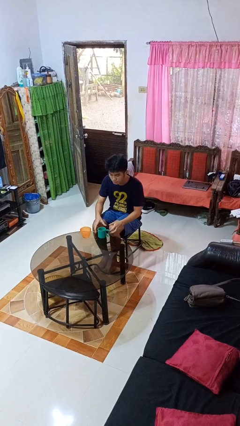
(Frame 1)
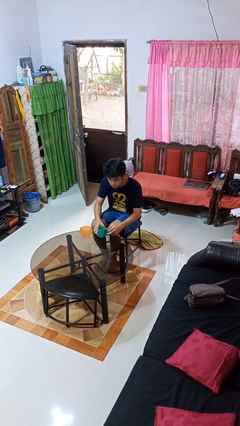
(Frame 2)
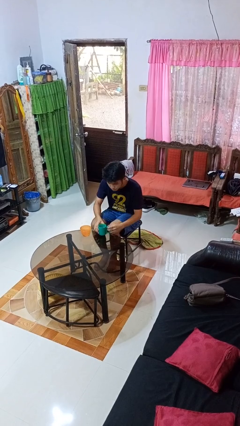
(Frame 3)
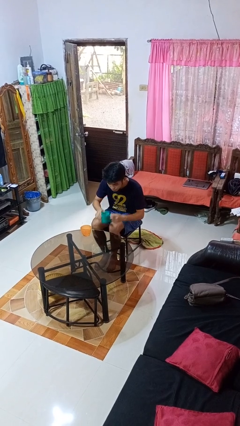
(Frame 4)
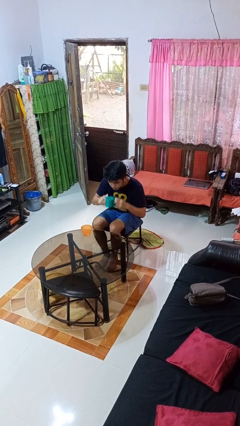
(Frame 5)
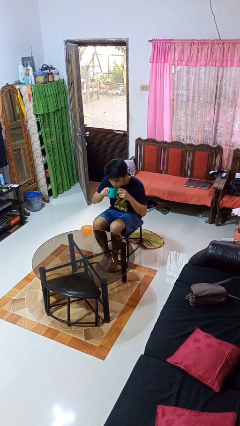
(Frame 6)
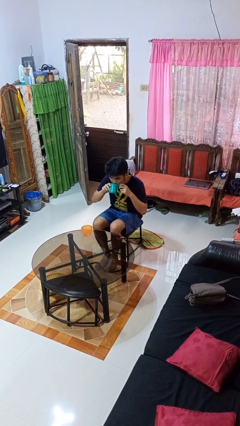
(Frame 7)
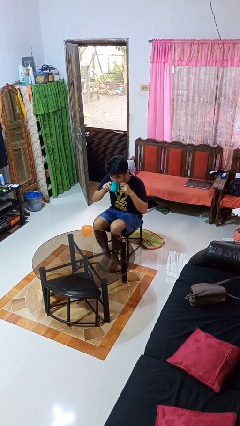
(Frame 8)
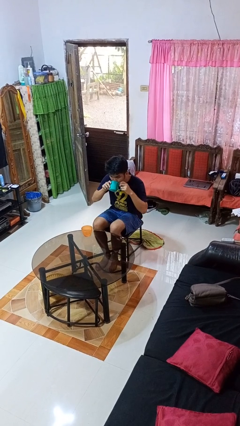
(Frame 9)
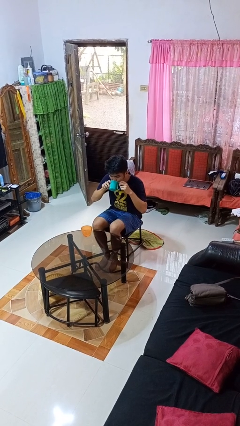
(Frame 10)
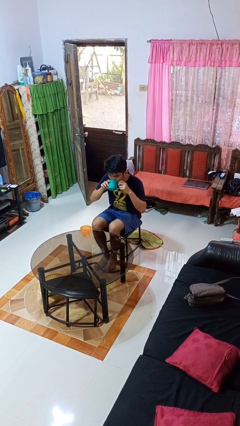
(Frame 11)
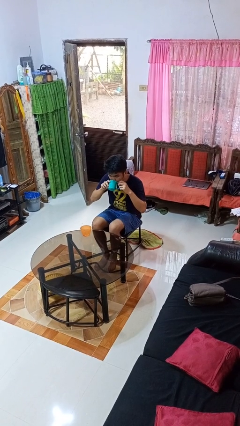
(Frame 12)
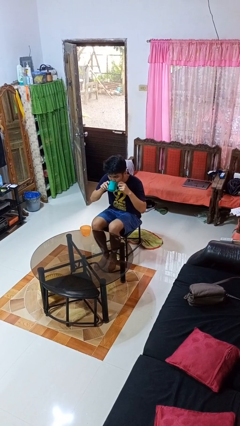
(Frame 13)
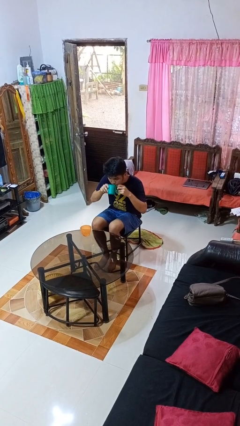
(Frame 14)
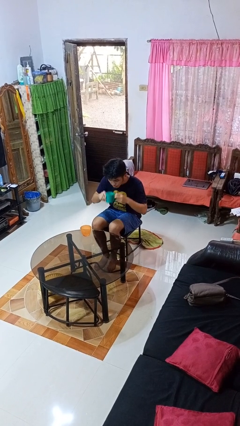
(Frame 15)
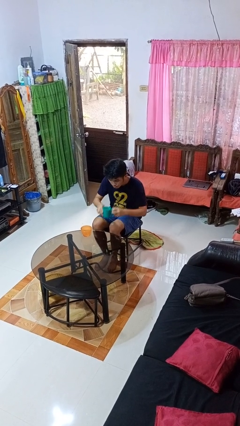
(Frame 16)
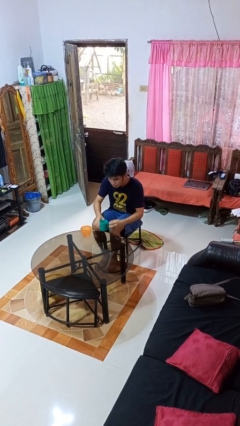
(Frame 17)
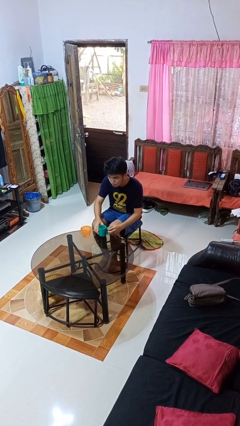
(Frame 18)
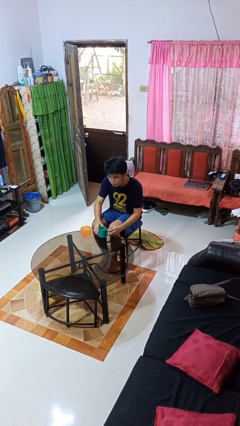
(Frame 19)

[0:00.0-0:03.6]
person drinks from cup

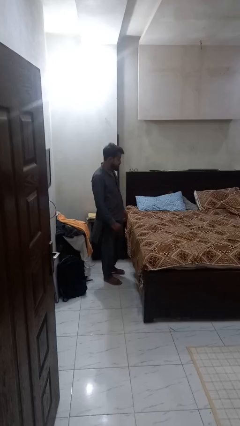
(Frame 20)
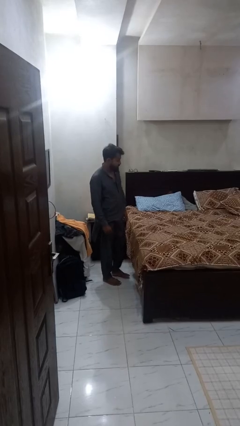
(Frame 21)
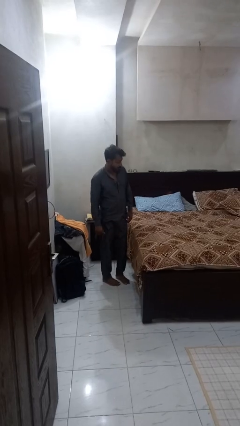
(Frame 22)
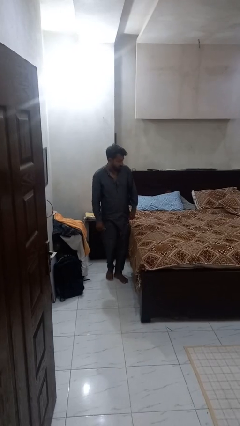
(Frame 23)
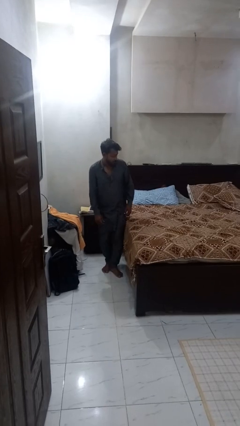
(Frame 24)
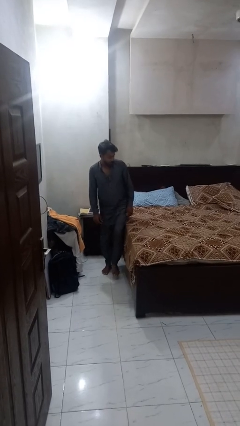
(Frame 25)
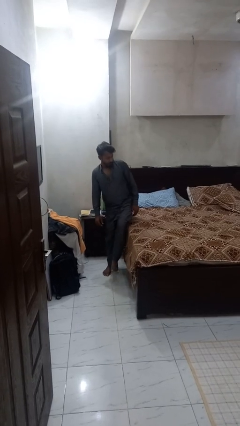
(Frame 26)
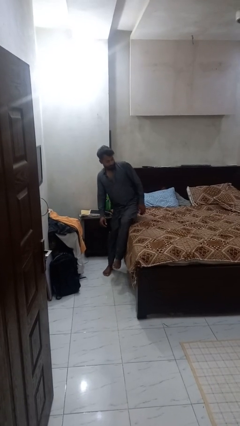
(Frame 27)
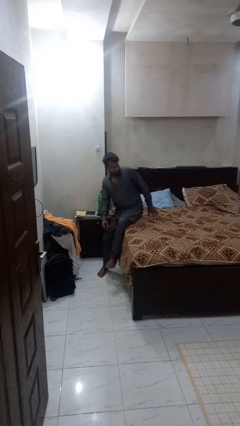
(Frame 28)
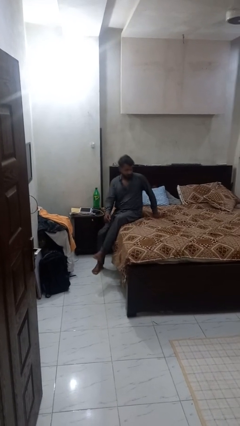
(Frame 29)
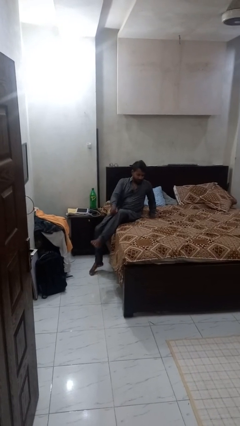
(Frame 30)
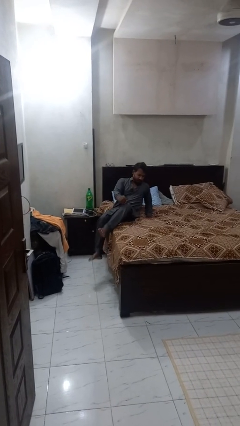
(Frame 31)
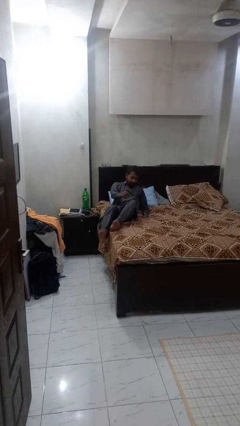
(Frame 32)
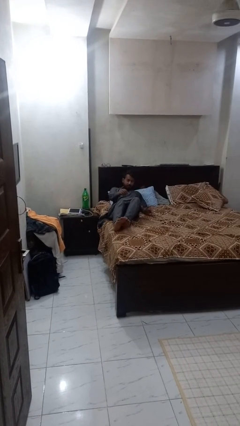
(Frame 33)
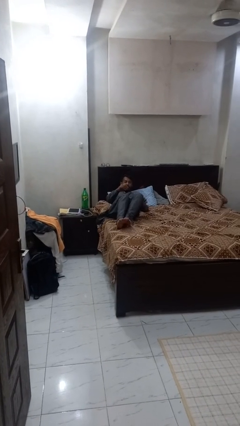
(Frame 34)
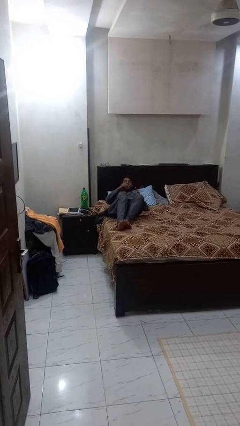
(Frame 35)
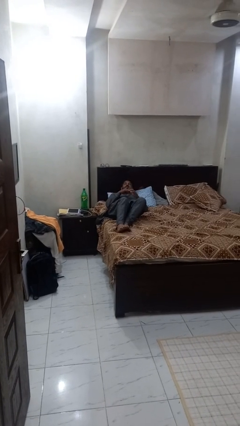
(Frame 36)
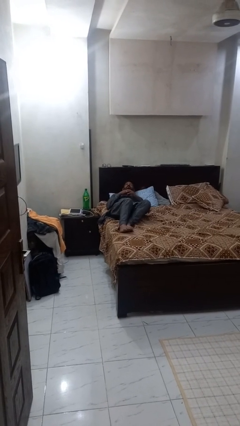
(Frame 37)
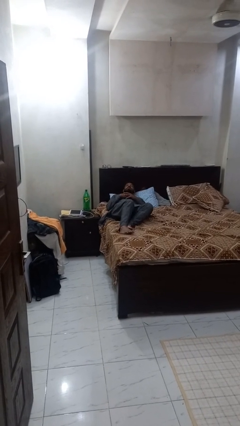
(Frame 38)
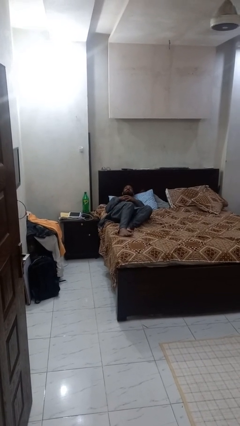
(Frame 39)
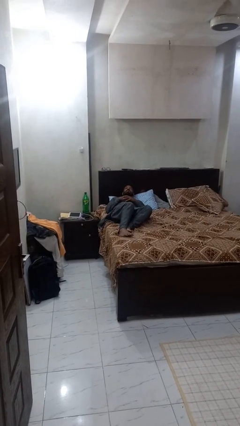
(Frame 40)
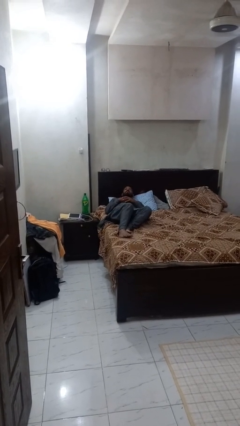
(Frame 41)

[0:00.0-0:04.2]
person lies down on bed

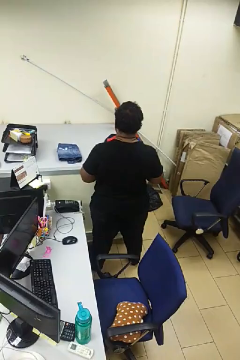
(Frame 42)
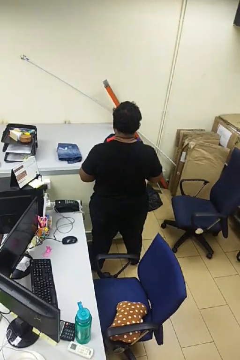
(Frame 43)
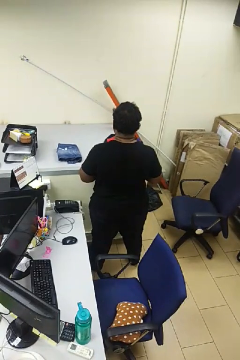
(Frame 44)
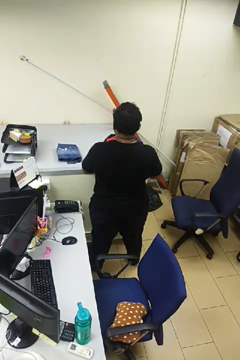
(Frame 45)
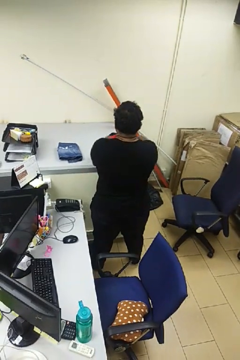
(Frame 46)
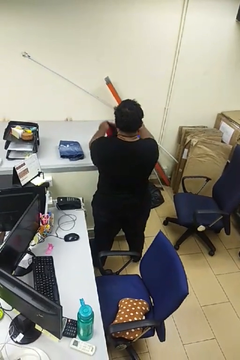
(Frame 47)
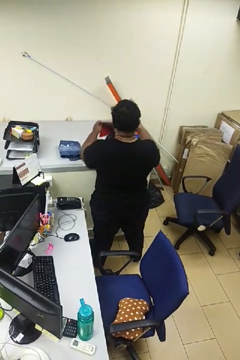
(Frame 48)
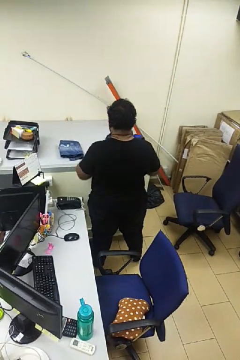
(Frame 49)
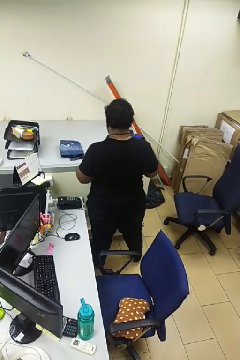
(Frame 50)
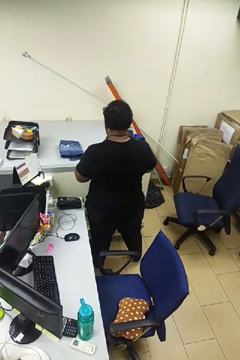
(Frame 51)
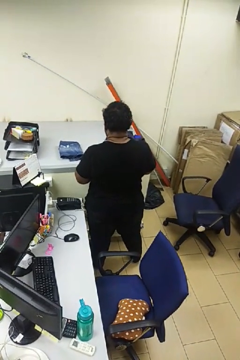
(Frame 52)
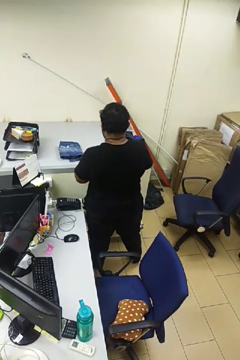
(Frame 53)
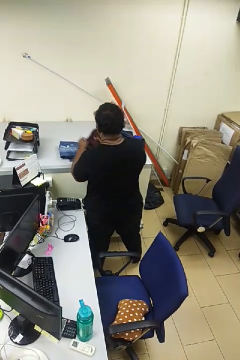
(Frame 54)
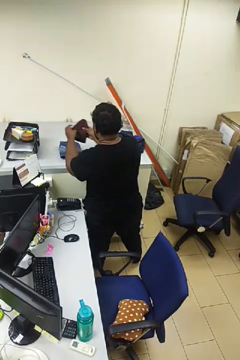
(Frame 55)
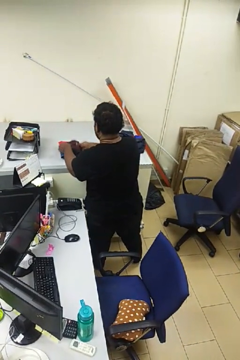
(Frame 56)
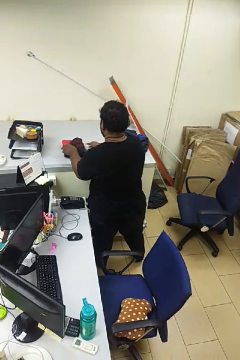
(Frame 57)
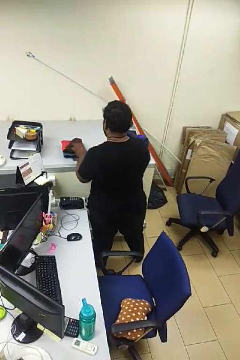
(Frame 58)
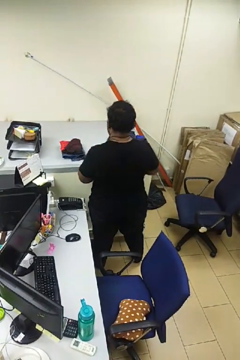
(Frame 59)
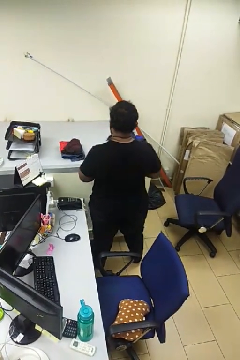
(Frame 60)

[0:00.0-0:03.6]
person folds shirt

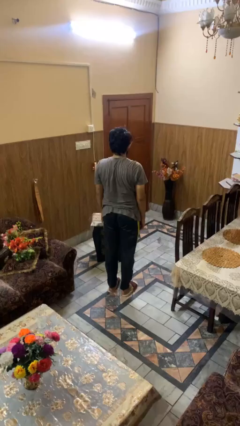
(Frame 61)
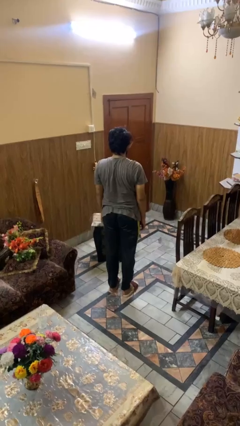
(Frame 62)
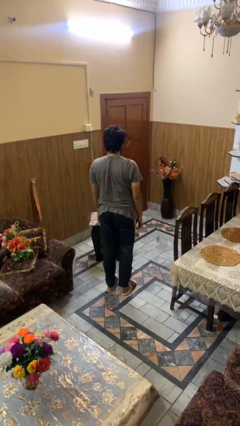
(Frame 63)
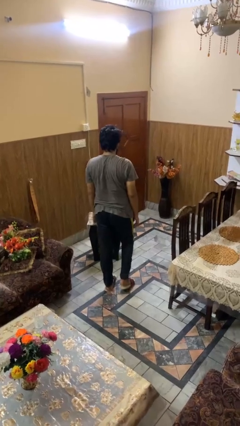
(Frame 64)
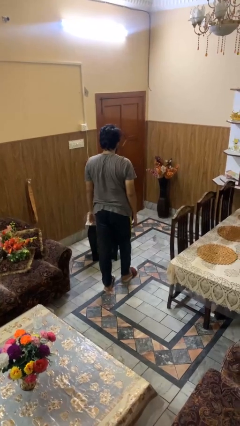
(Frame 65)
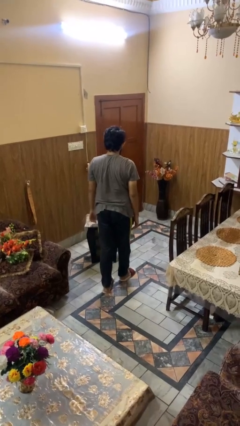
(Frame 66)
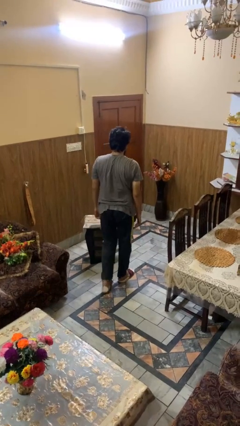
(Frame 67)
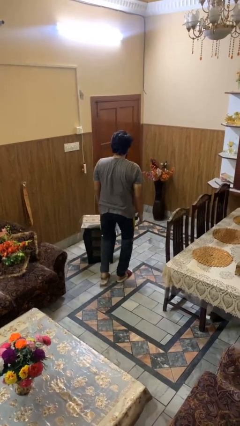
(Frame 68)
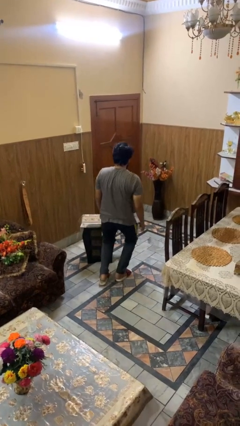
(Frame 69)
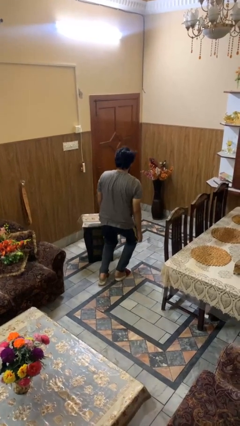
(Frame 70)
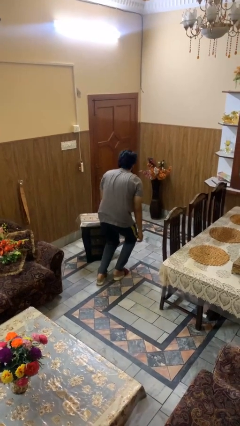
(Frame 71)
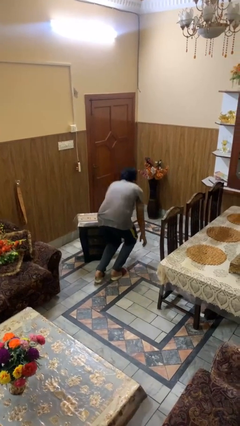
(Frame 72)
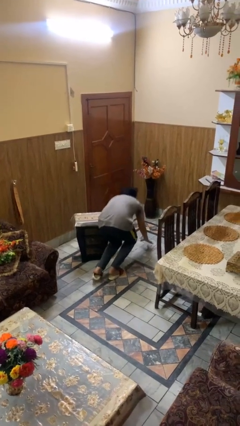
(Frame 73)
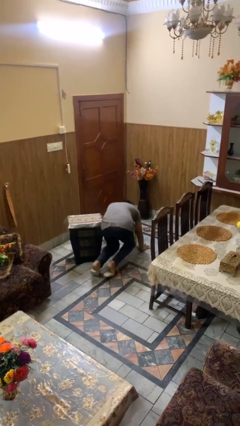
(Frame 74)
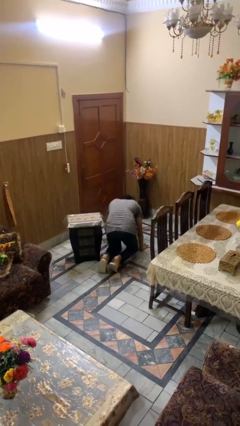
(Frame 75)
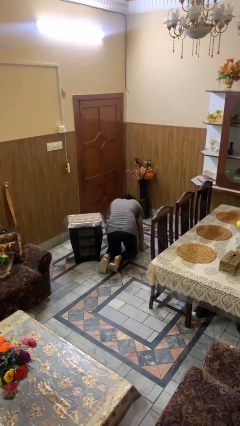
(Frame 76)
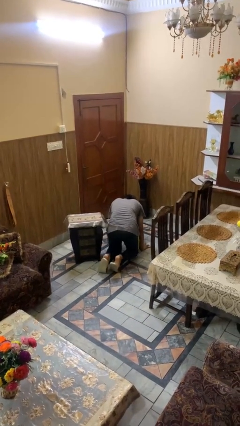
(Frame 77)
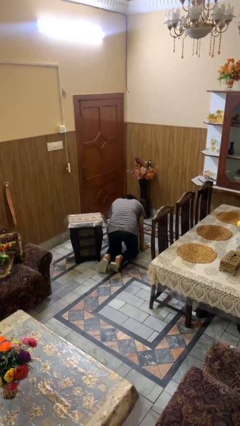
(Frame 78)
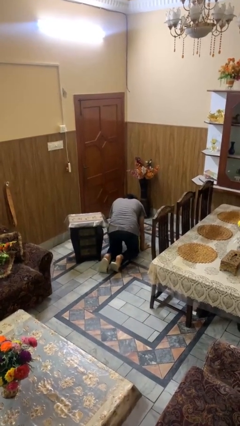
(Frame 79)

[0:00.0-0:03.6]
person trips on object on floor

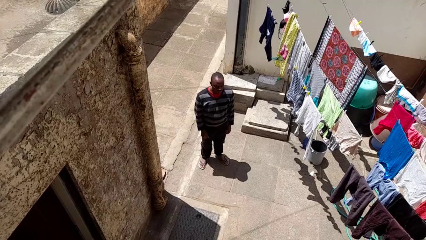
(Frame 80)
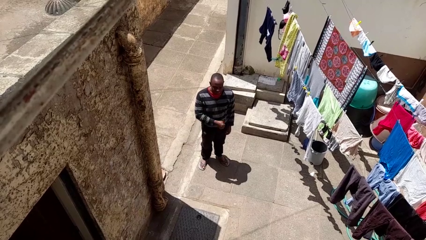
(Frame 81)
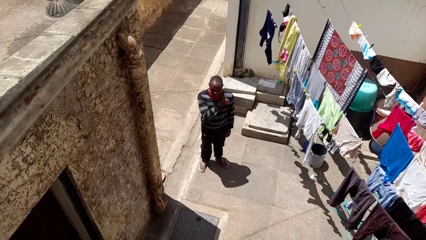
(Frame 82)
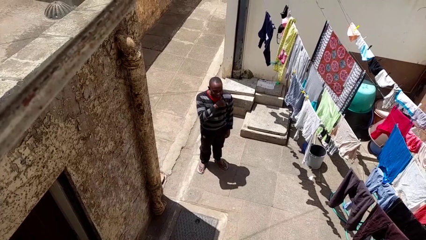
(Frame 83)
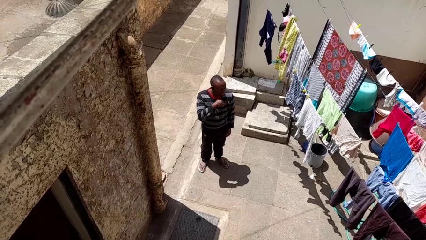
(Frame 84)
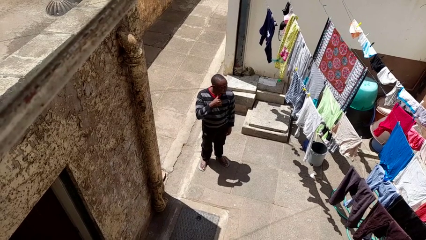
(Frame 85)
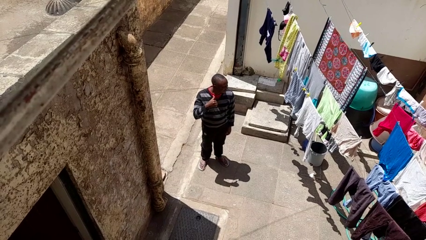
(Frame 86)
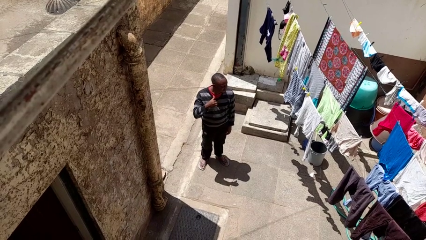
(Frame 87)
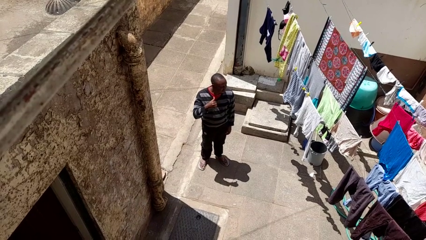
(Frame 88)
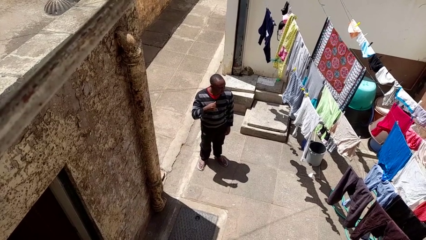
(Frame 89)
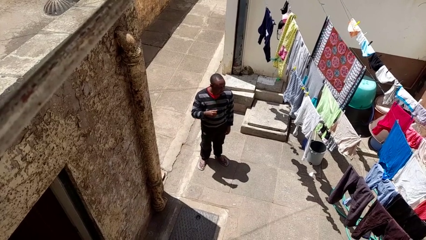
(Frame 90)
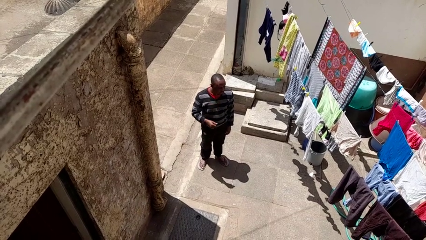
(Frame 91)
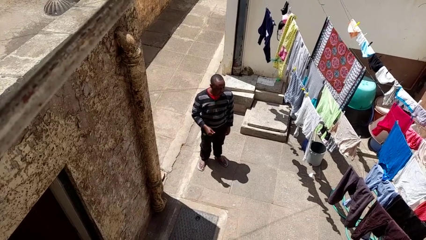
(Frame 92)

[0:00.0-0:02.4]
person gestures cut

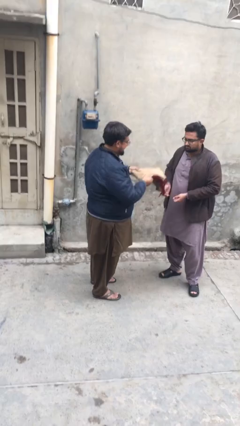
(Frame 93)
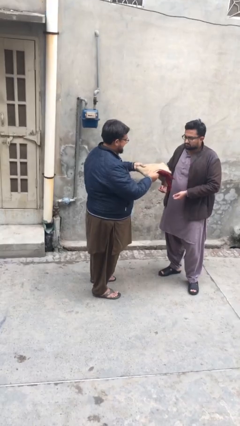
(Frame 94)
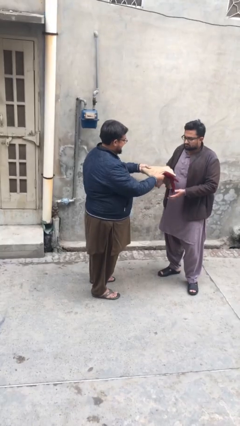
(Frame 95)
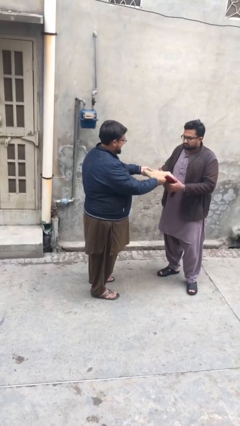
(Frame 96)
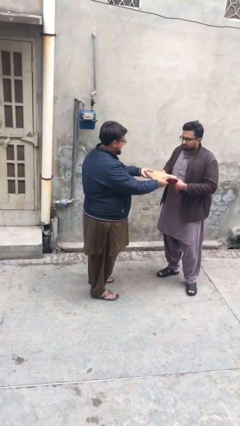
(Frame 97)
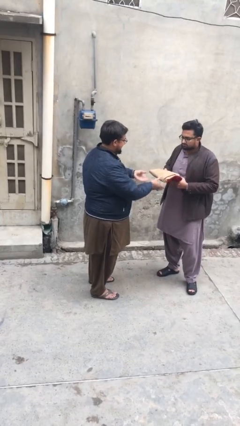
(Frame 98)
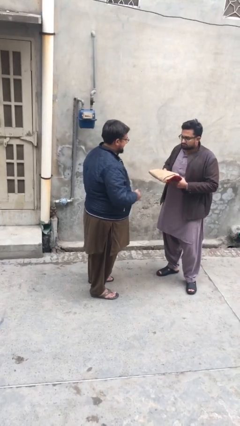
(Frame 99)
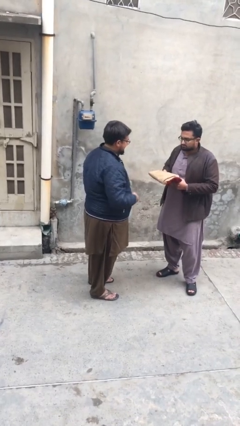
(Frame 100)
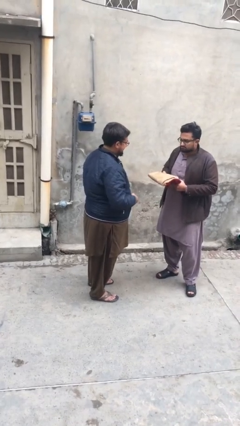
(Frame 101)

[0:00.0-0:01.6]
person transfers object to person
